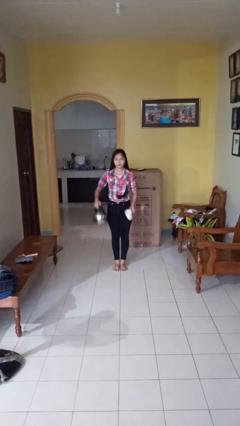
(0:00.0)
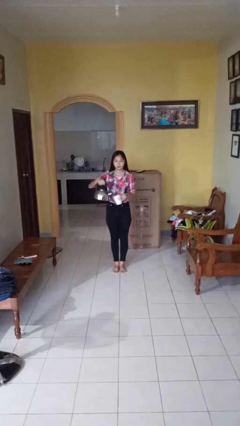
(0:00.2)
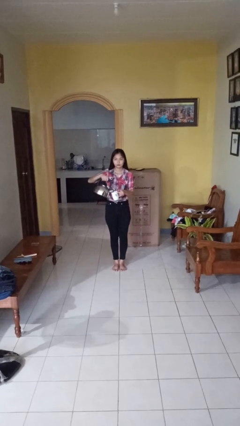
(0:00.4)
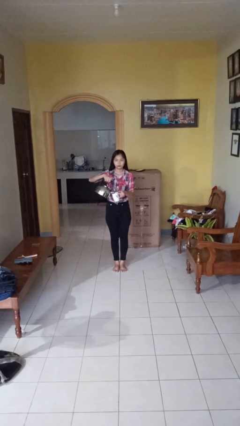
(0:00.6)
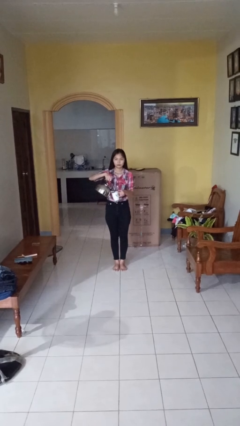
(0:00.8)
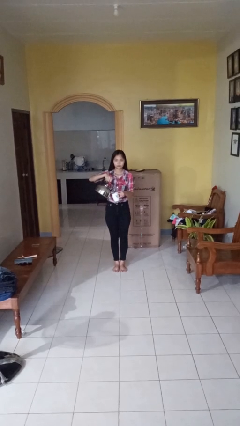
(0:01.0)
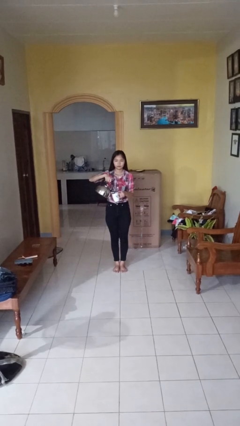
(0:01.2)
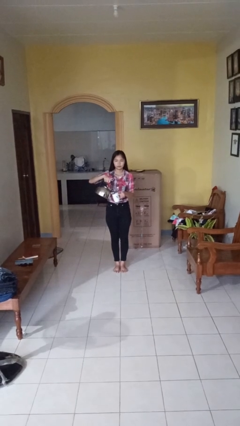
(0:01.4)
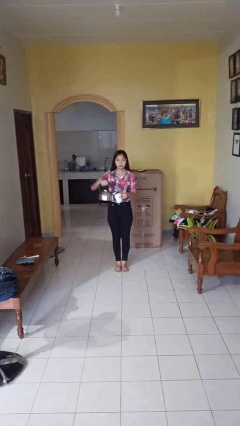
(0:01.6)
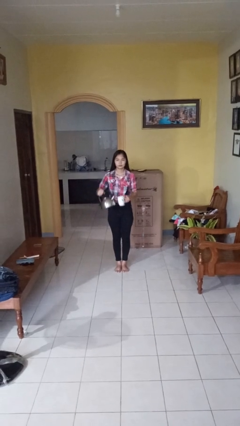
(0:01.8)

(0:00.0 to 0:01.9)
person pours coffee into mug

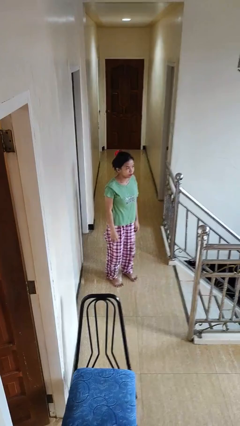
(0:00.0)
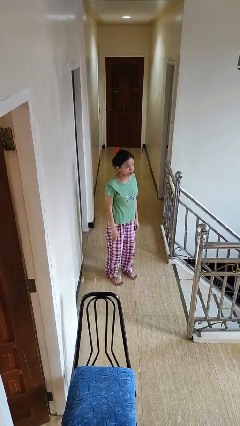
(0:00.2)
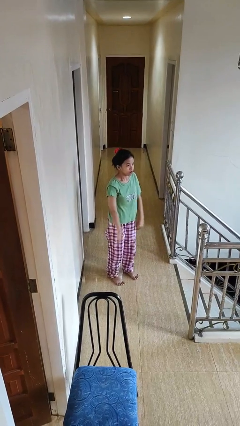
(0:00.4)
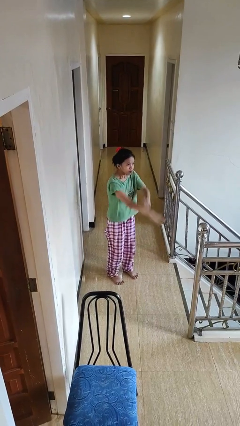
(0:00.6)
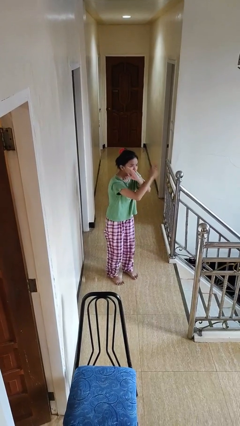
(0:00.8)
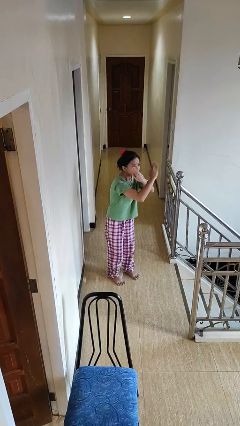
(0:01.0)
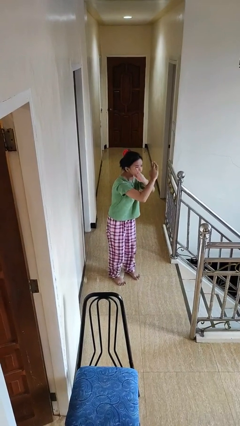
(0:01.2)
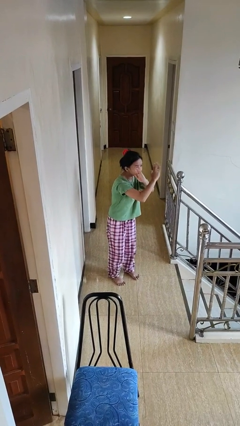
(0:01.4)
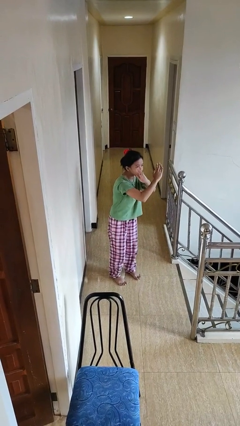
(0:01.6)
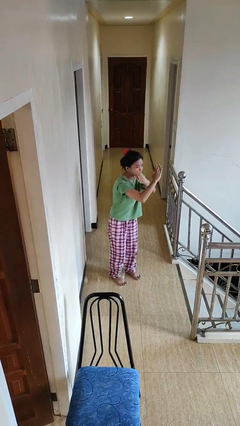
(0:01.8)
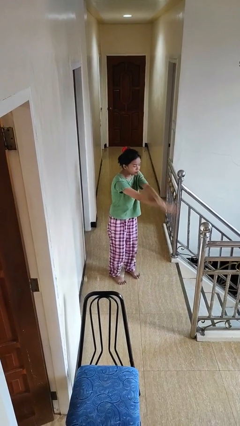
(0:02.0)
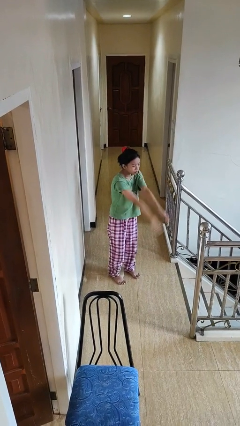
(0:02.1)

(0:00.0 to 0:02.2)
person gestures arms x

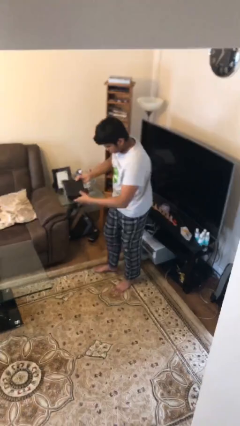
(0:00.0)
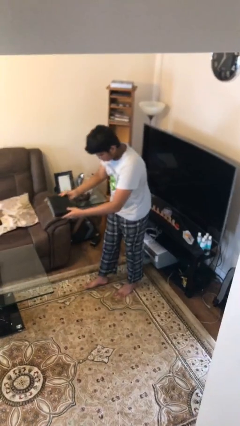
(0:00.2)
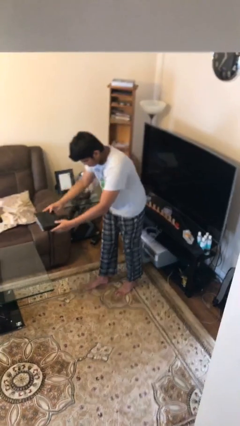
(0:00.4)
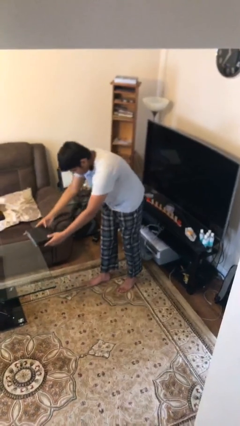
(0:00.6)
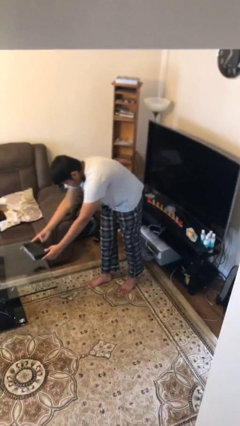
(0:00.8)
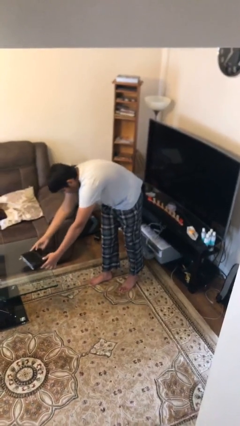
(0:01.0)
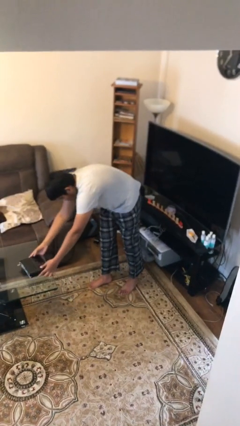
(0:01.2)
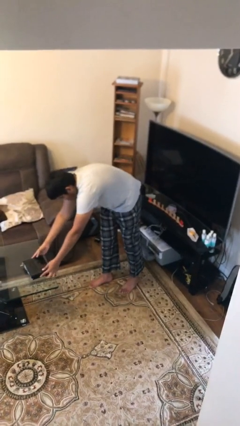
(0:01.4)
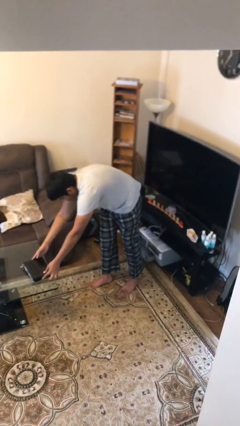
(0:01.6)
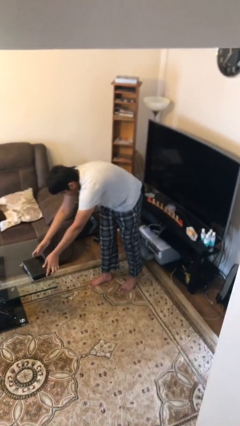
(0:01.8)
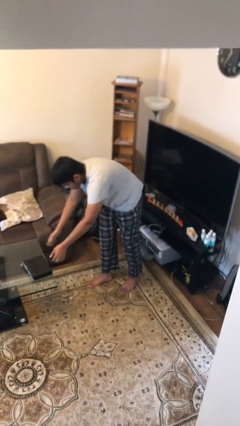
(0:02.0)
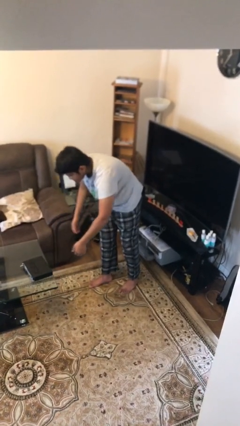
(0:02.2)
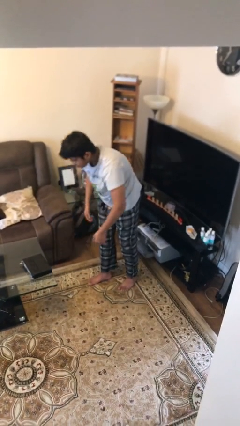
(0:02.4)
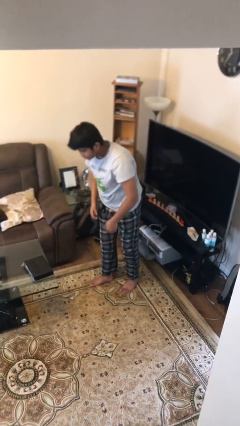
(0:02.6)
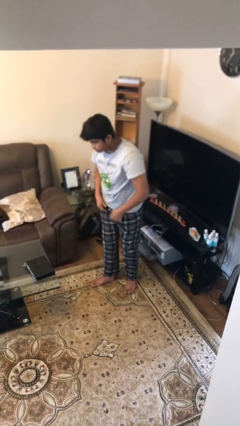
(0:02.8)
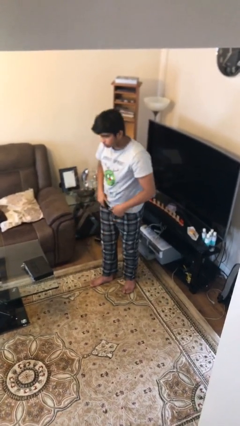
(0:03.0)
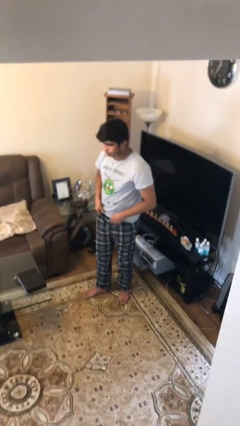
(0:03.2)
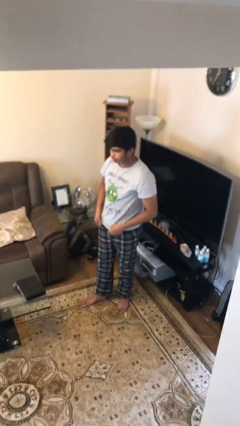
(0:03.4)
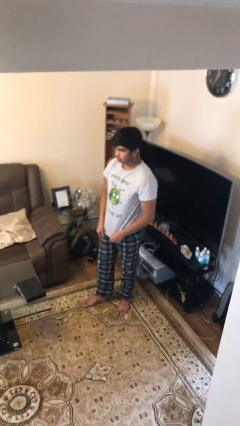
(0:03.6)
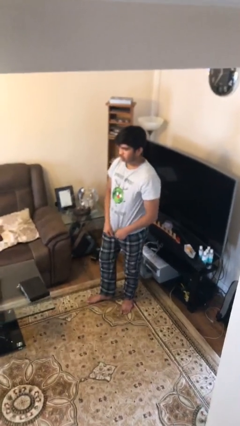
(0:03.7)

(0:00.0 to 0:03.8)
person puts down object on table

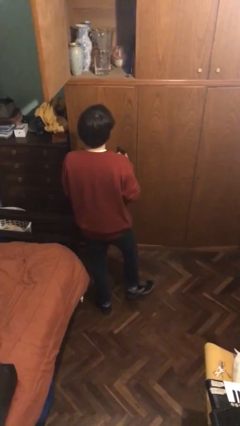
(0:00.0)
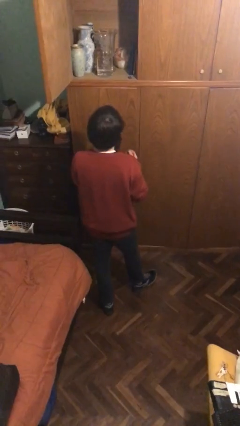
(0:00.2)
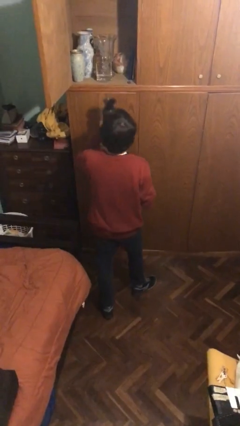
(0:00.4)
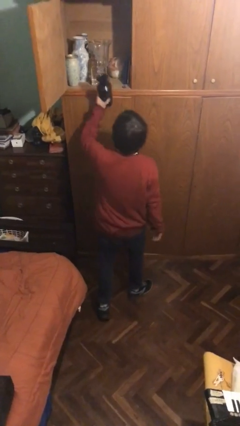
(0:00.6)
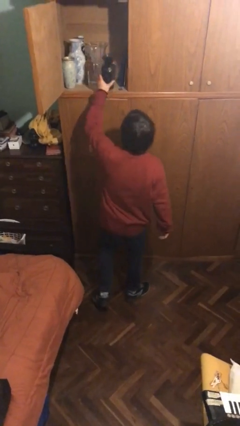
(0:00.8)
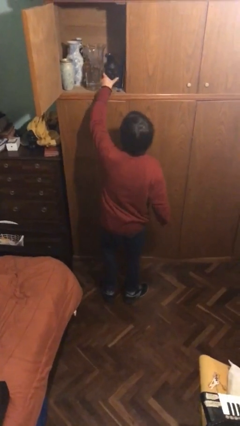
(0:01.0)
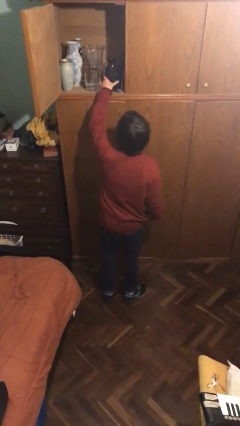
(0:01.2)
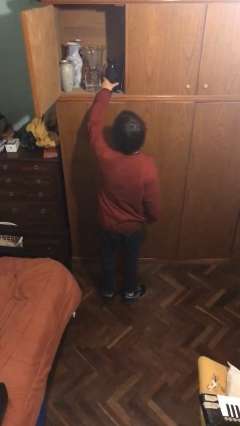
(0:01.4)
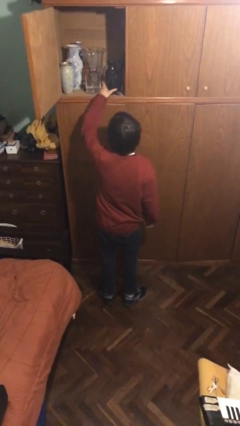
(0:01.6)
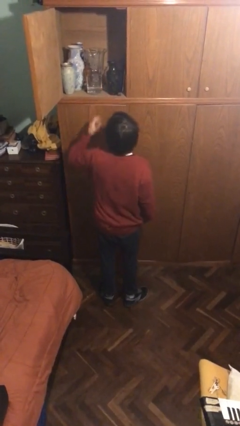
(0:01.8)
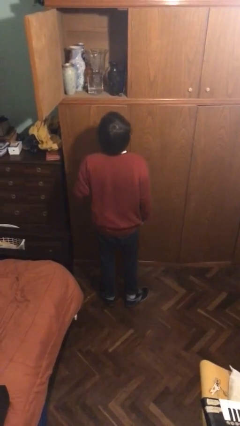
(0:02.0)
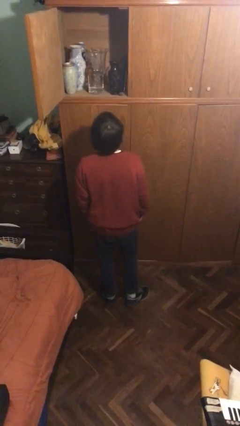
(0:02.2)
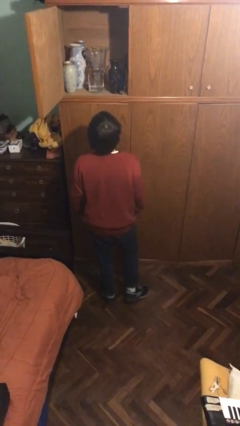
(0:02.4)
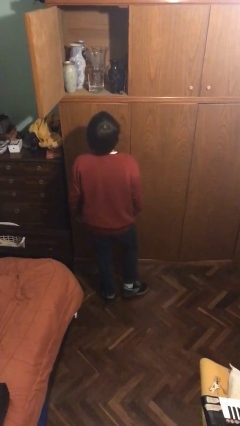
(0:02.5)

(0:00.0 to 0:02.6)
person puts down object into cabinet

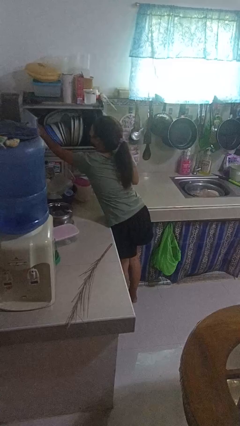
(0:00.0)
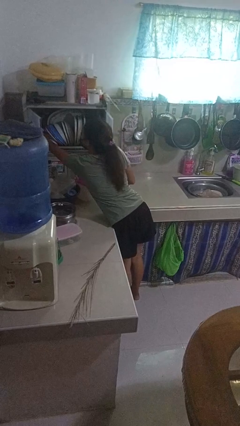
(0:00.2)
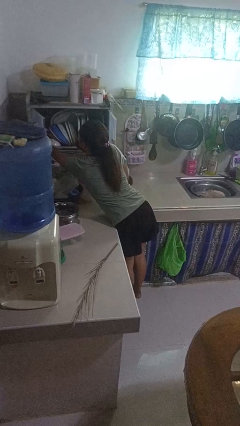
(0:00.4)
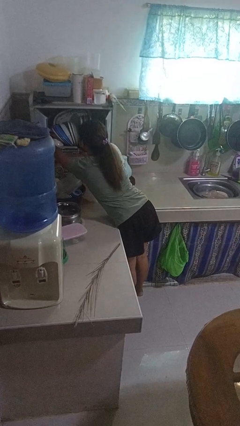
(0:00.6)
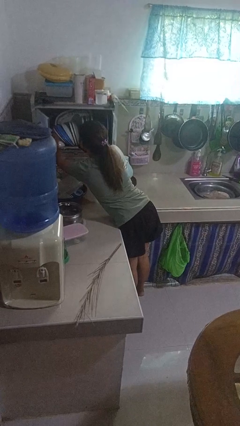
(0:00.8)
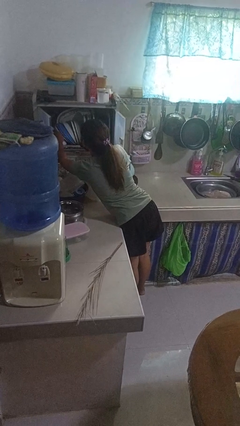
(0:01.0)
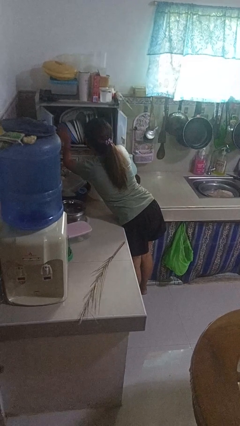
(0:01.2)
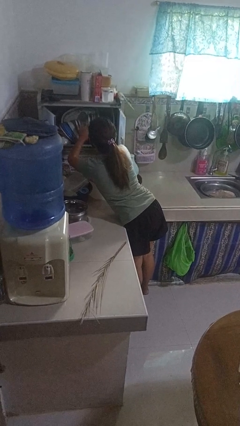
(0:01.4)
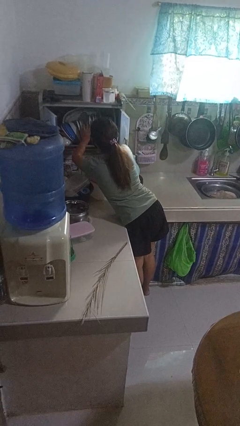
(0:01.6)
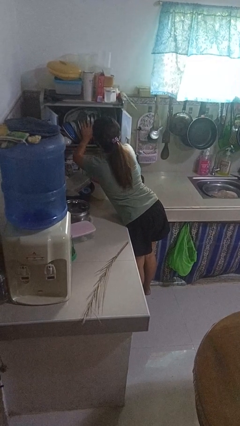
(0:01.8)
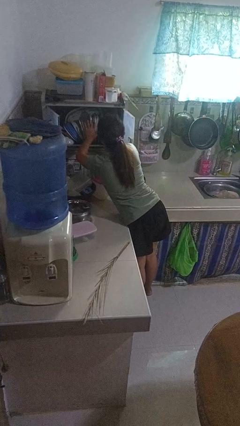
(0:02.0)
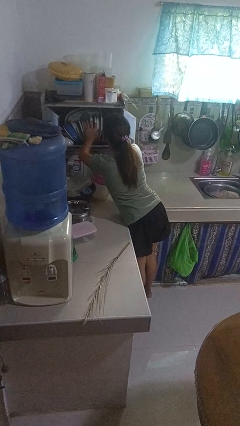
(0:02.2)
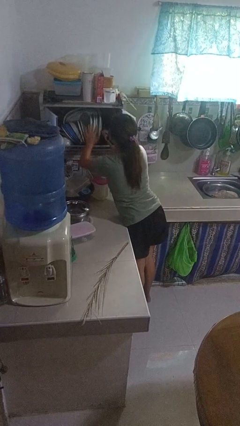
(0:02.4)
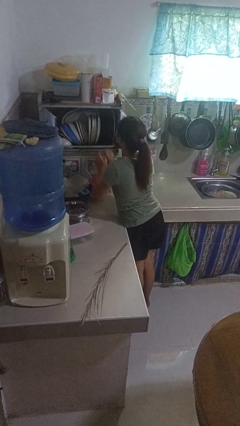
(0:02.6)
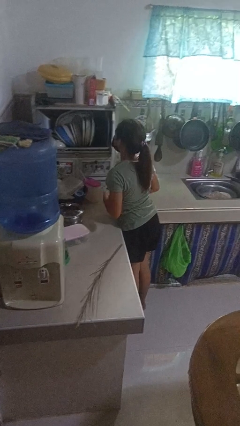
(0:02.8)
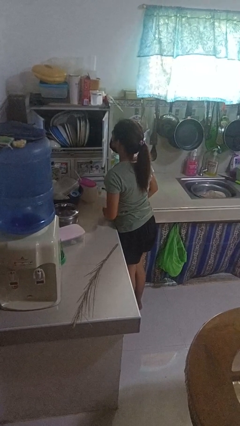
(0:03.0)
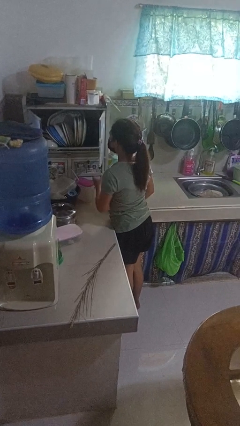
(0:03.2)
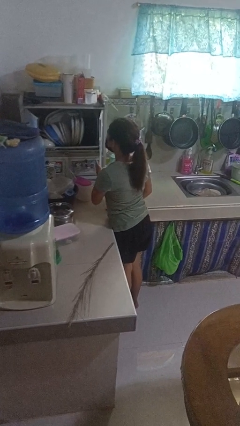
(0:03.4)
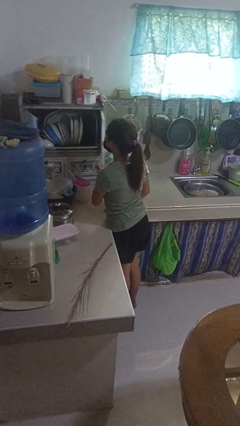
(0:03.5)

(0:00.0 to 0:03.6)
person searches in kitchen drawer

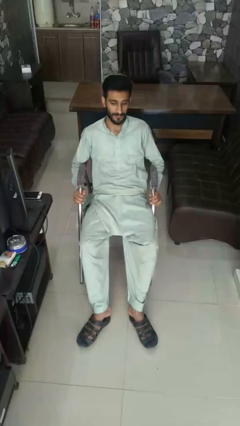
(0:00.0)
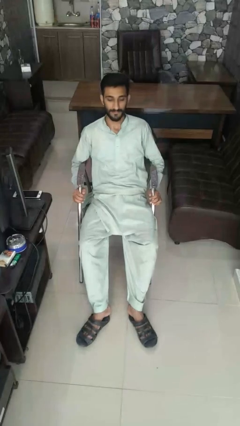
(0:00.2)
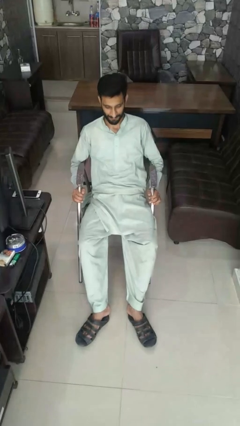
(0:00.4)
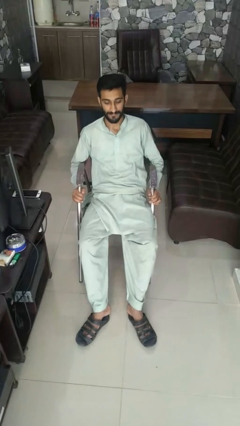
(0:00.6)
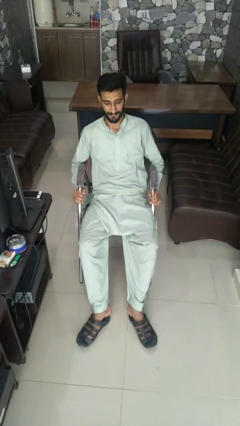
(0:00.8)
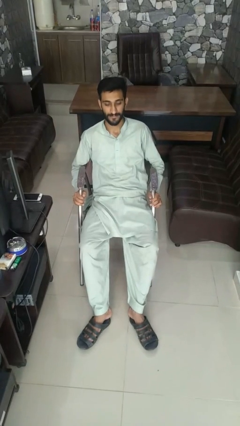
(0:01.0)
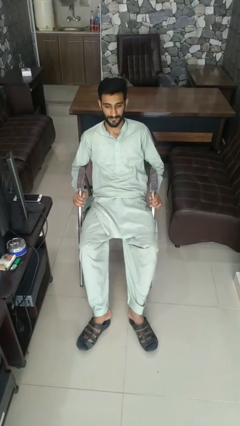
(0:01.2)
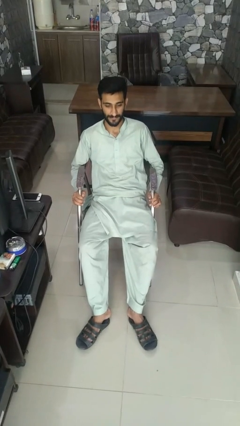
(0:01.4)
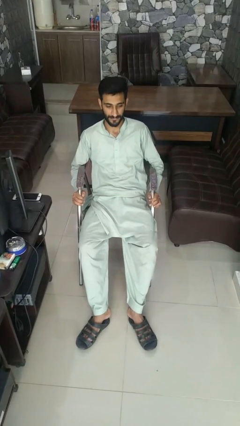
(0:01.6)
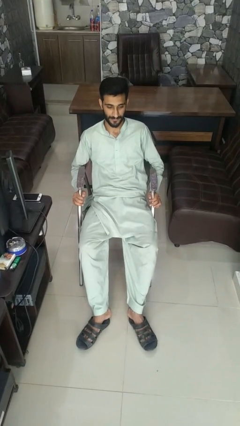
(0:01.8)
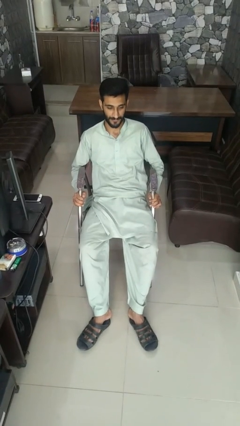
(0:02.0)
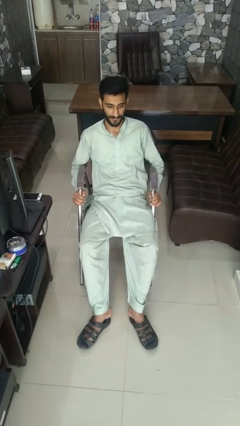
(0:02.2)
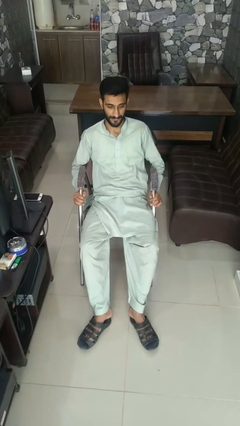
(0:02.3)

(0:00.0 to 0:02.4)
person nods head

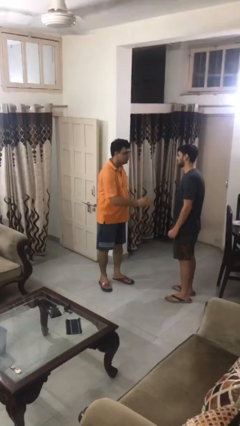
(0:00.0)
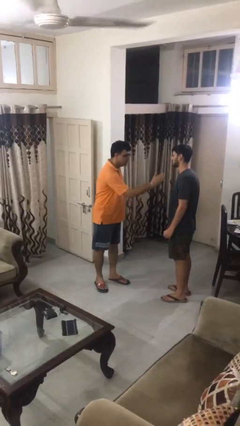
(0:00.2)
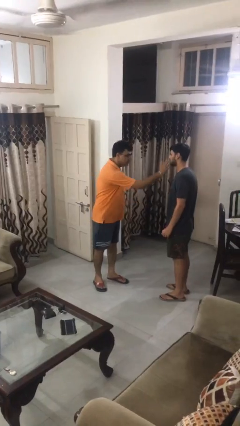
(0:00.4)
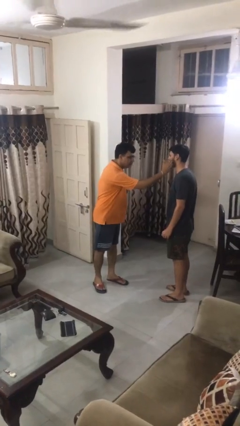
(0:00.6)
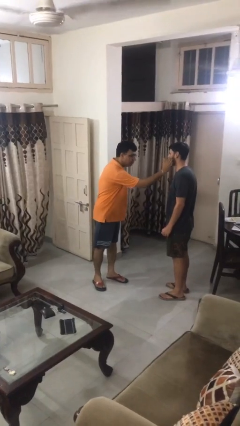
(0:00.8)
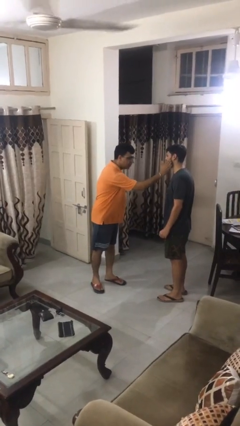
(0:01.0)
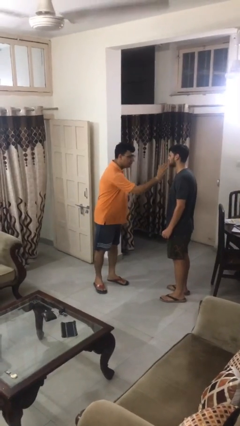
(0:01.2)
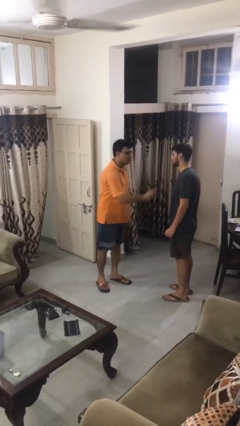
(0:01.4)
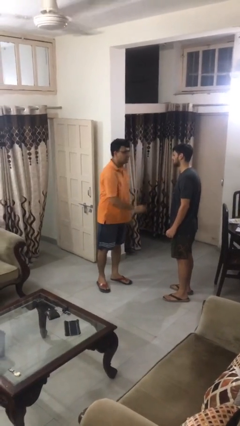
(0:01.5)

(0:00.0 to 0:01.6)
person touches face of person
